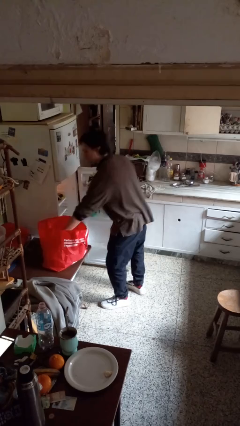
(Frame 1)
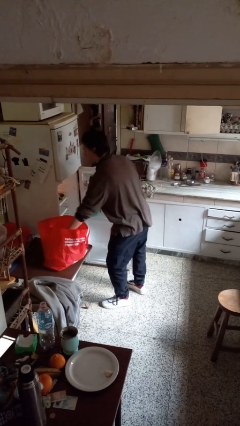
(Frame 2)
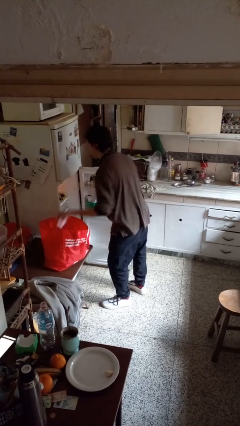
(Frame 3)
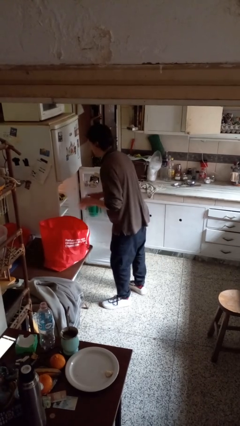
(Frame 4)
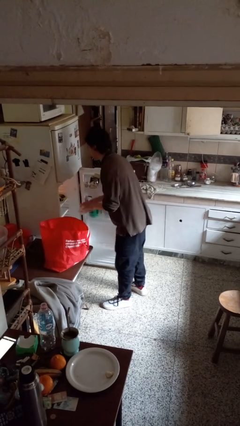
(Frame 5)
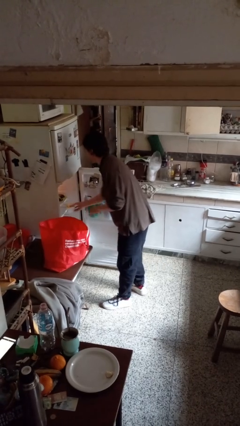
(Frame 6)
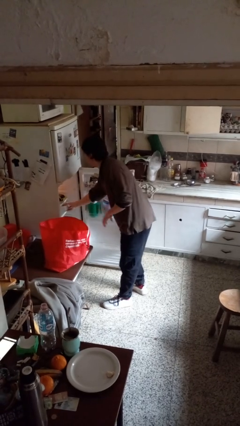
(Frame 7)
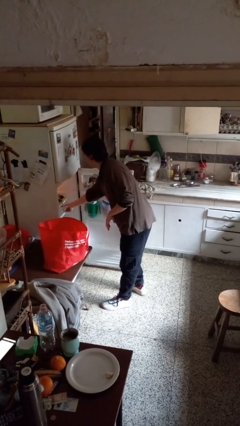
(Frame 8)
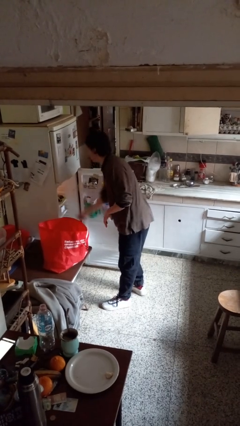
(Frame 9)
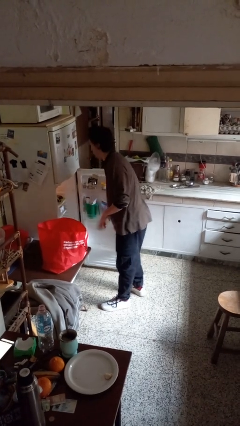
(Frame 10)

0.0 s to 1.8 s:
person loads groceries into refrigerator

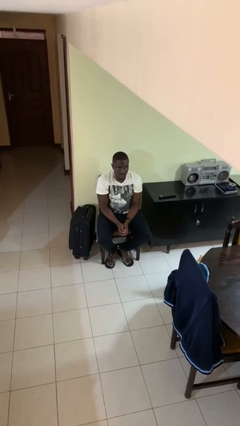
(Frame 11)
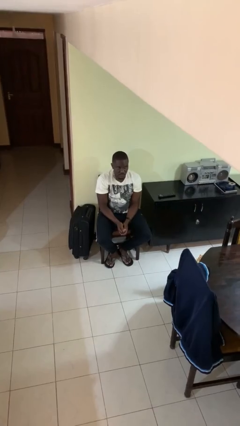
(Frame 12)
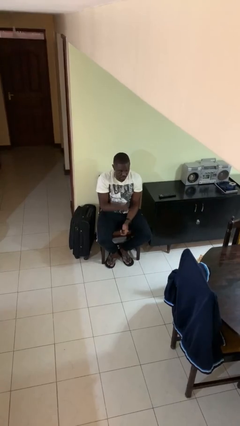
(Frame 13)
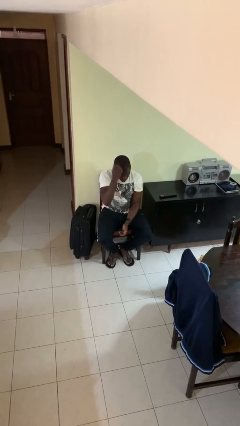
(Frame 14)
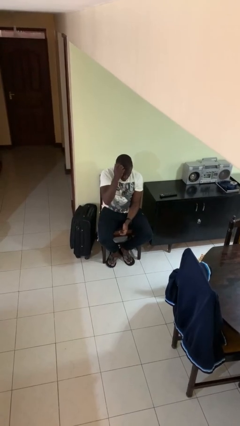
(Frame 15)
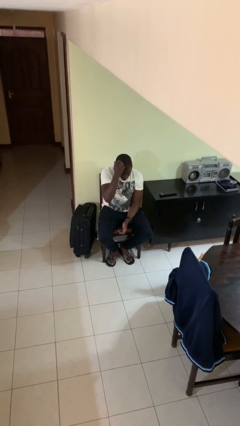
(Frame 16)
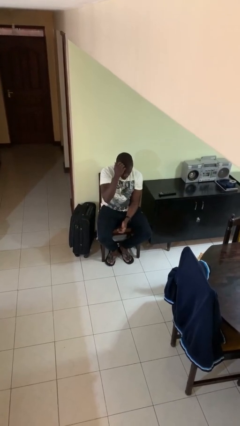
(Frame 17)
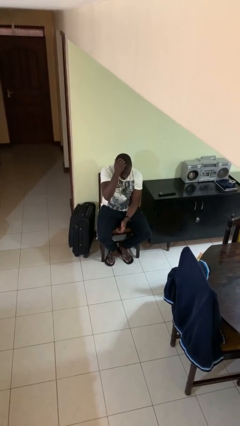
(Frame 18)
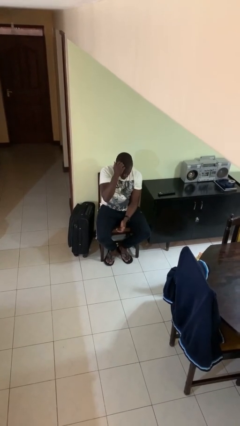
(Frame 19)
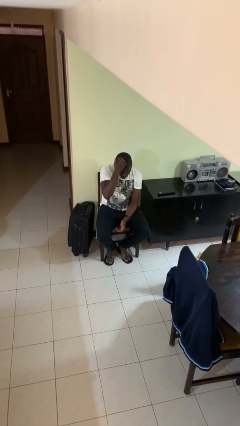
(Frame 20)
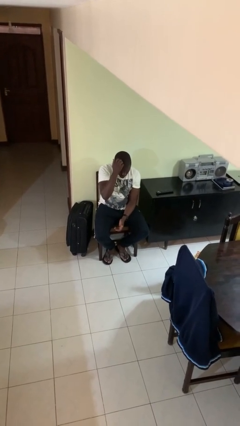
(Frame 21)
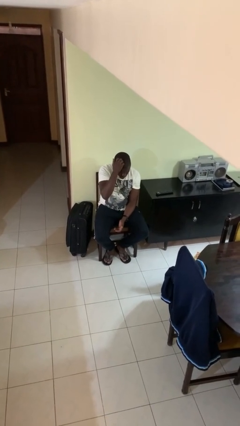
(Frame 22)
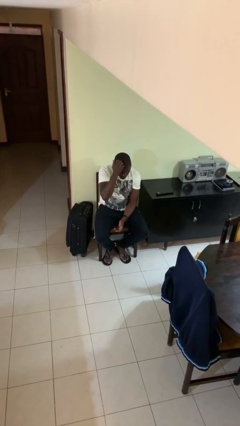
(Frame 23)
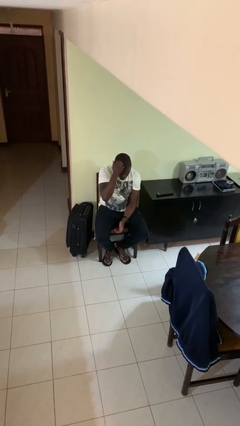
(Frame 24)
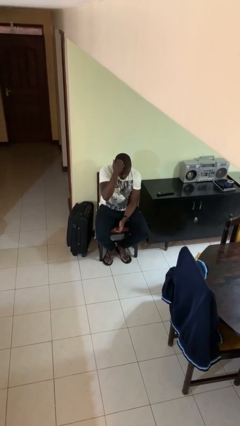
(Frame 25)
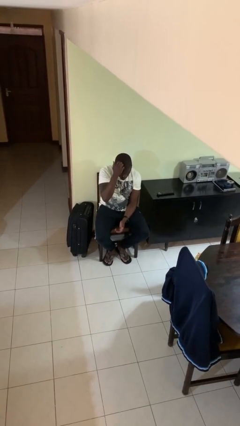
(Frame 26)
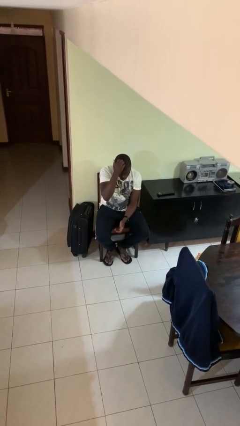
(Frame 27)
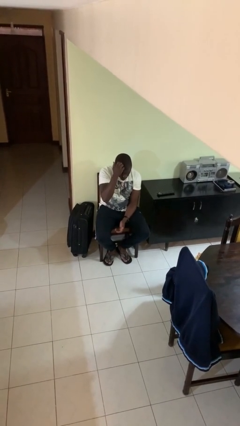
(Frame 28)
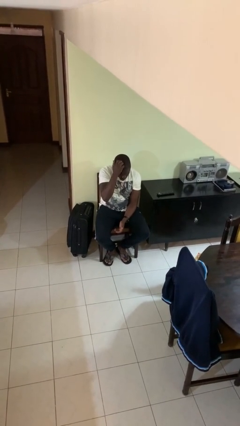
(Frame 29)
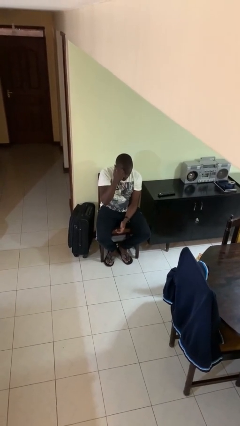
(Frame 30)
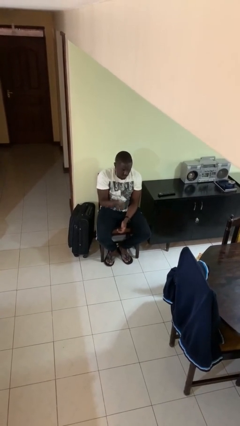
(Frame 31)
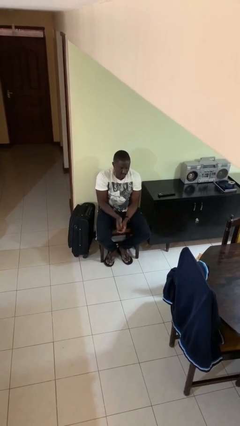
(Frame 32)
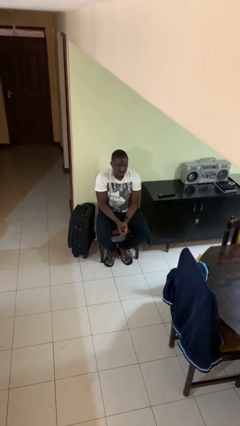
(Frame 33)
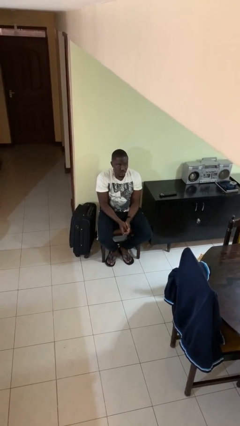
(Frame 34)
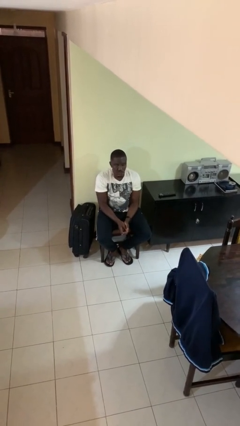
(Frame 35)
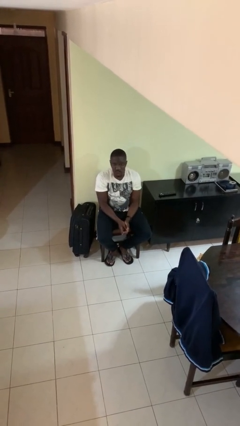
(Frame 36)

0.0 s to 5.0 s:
person scratches face

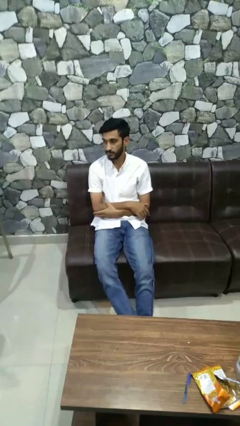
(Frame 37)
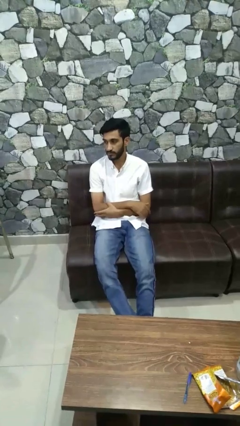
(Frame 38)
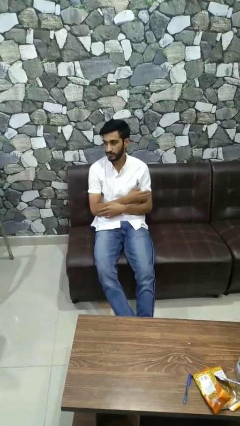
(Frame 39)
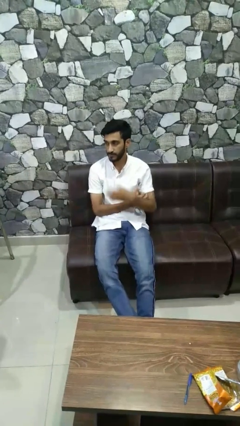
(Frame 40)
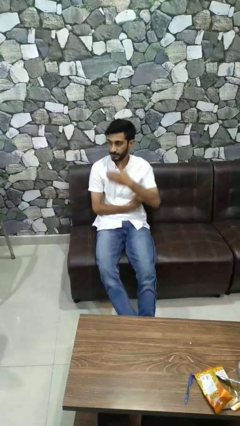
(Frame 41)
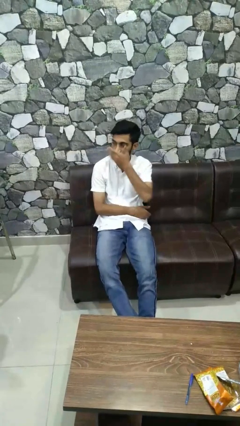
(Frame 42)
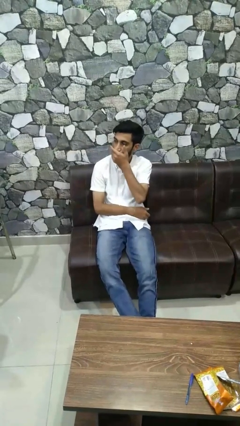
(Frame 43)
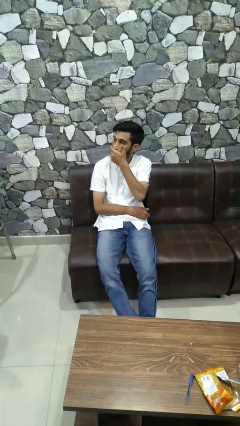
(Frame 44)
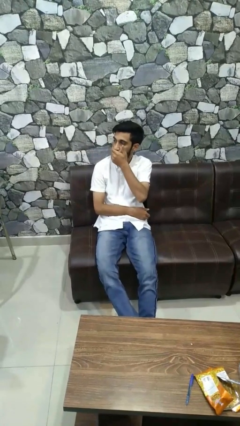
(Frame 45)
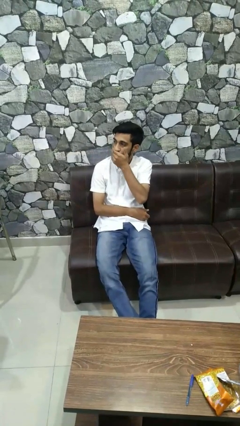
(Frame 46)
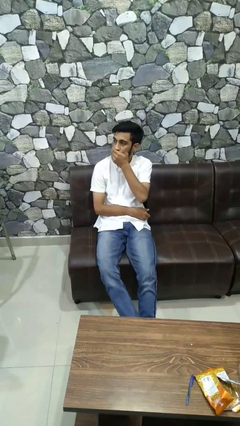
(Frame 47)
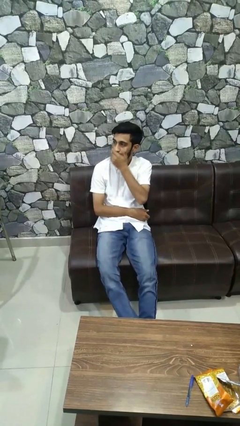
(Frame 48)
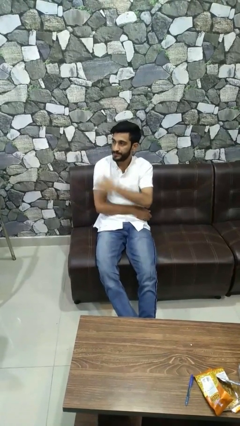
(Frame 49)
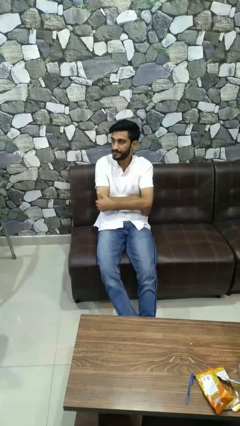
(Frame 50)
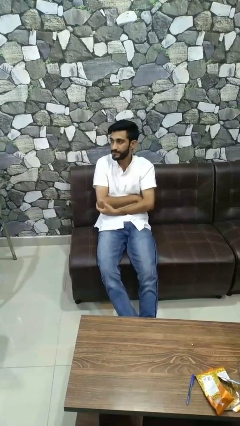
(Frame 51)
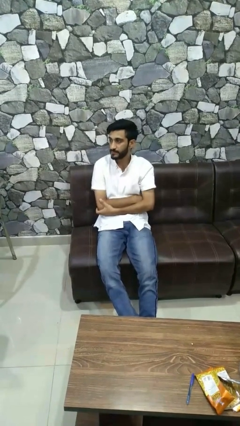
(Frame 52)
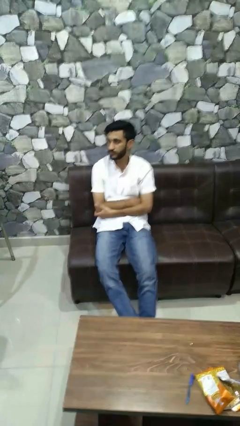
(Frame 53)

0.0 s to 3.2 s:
person covers face with hands

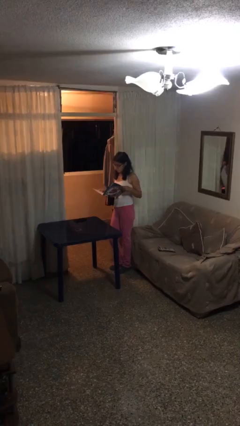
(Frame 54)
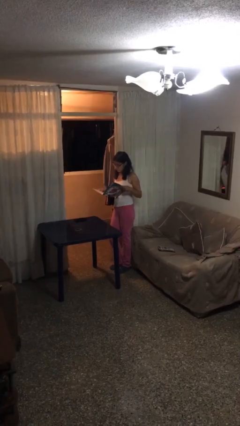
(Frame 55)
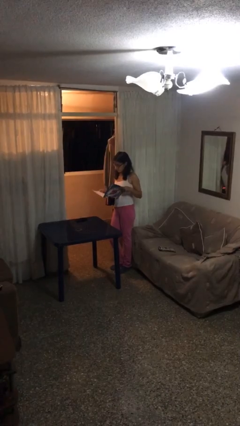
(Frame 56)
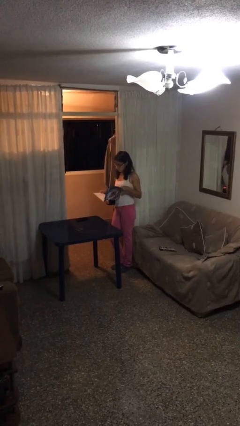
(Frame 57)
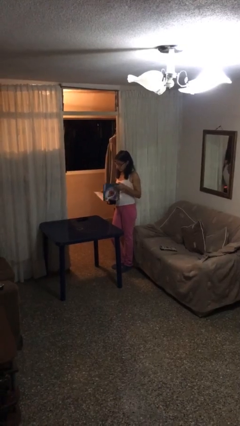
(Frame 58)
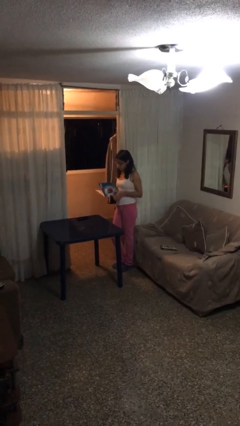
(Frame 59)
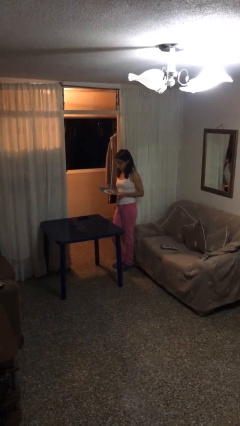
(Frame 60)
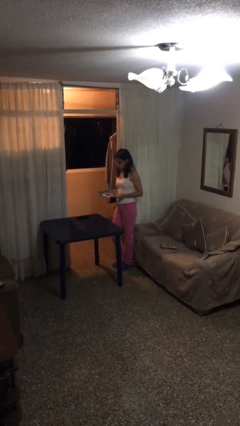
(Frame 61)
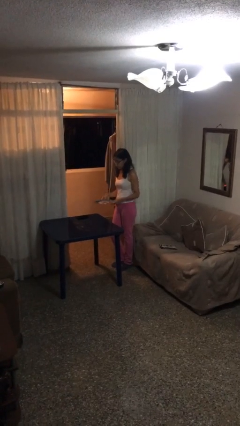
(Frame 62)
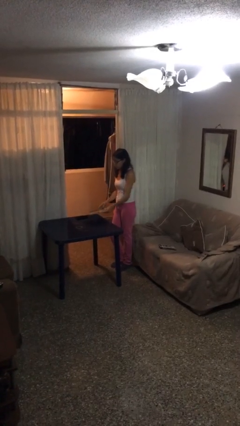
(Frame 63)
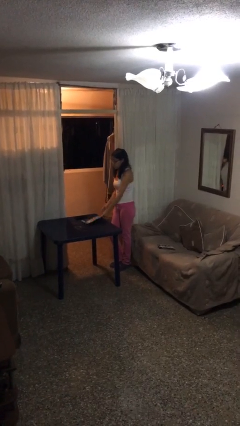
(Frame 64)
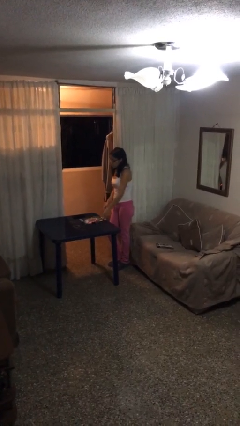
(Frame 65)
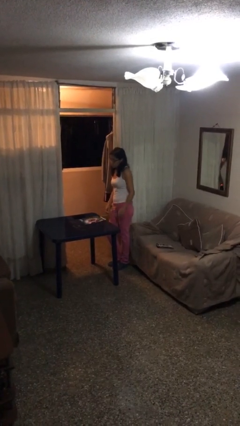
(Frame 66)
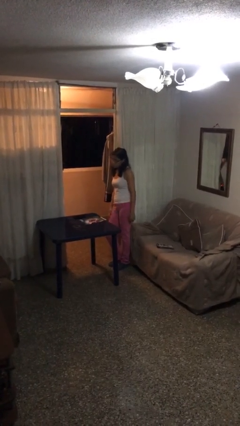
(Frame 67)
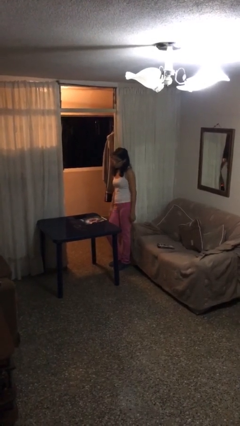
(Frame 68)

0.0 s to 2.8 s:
person puts down object on table

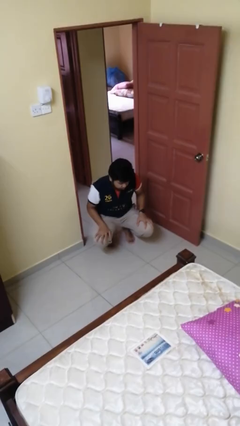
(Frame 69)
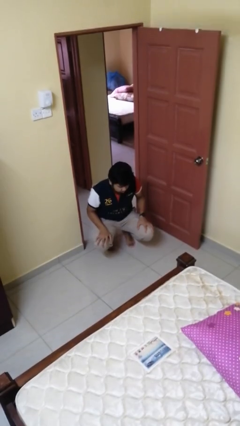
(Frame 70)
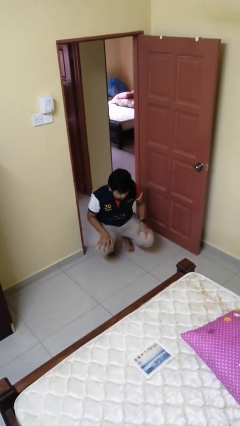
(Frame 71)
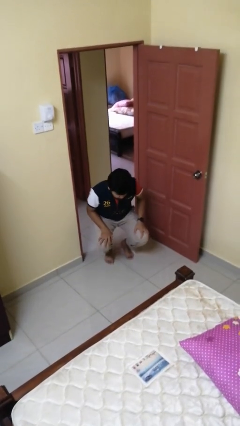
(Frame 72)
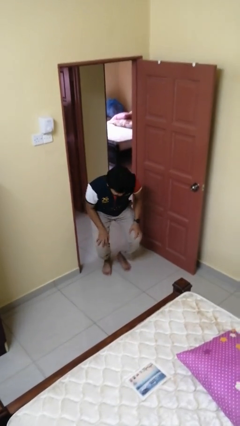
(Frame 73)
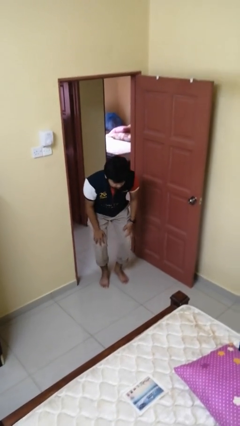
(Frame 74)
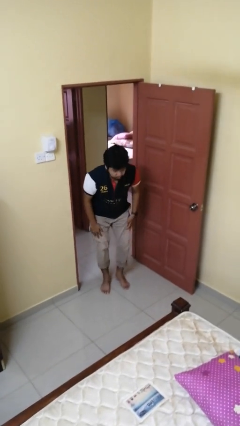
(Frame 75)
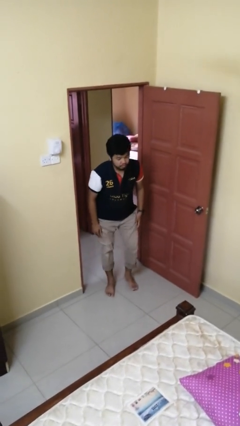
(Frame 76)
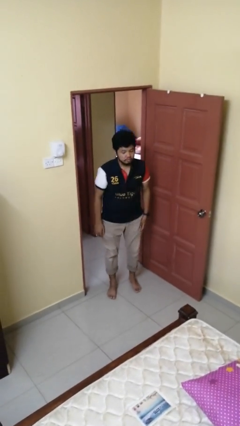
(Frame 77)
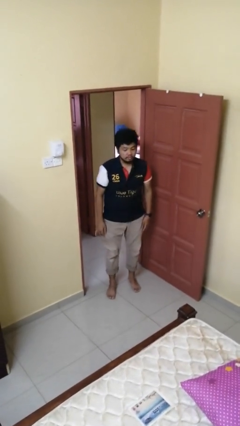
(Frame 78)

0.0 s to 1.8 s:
person stands up

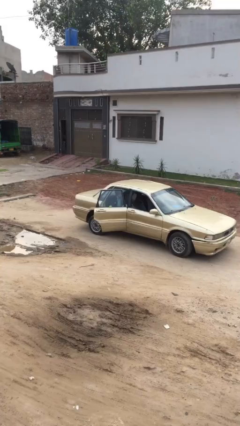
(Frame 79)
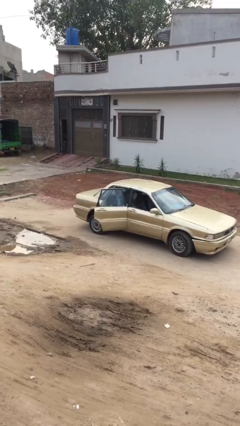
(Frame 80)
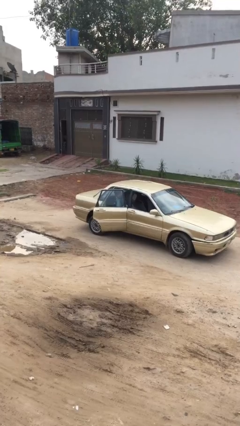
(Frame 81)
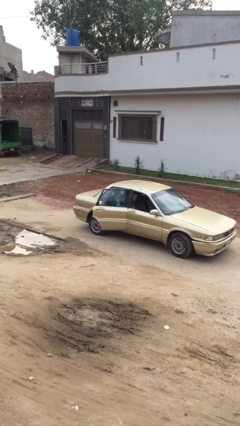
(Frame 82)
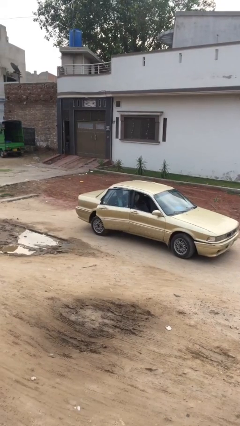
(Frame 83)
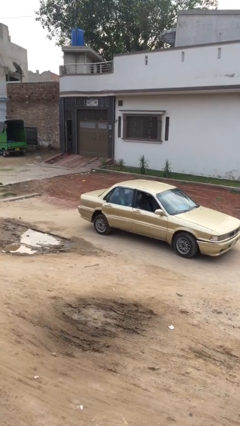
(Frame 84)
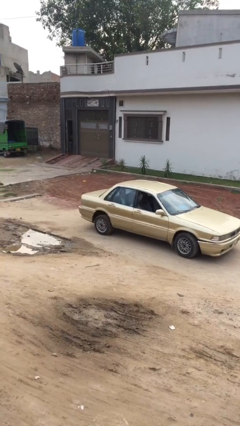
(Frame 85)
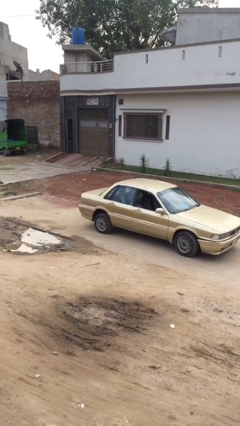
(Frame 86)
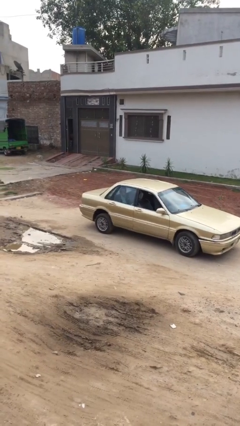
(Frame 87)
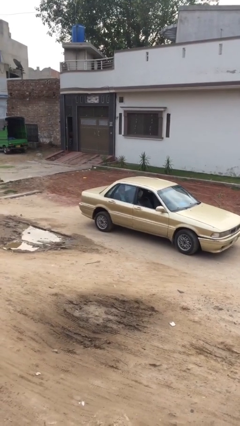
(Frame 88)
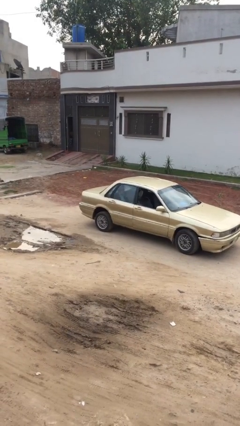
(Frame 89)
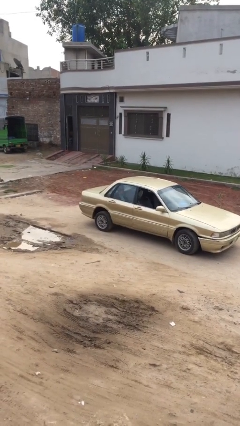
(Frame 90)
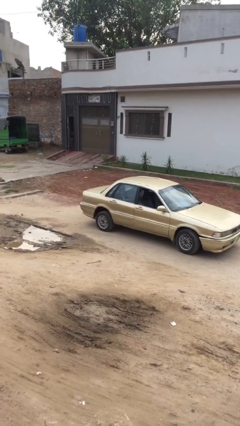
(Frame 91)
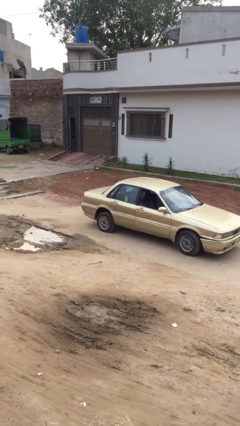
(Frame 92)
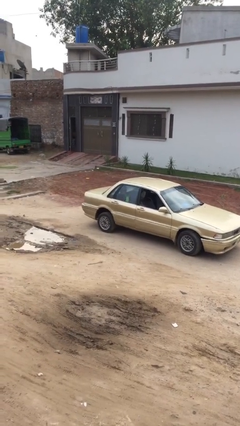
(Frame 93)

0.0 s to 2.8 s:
person closes car door
